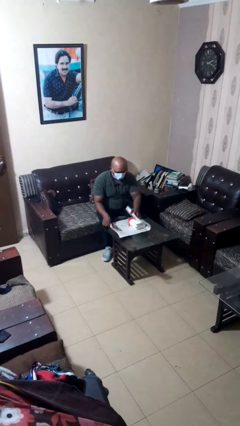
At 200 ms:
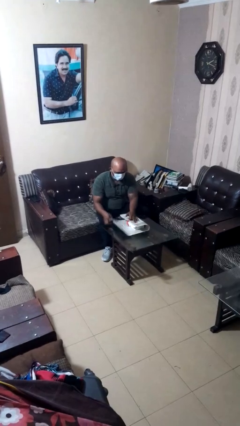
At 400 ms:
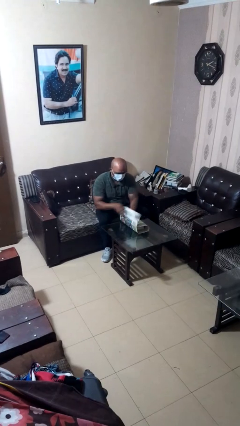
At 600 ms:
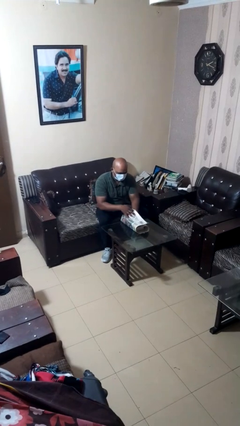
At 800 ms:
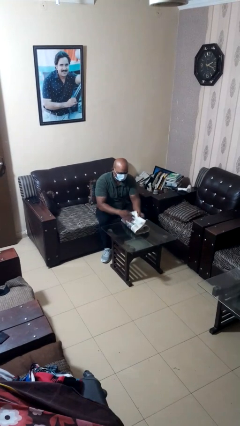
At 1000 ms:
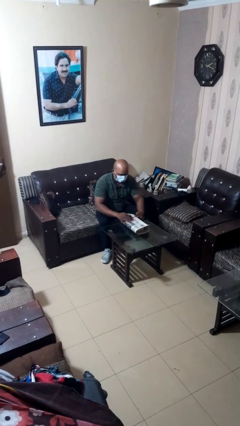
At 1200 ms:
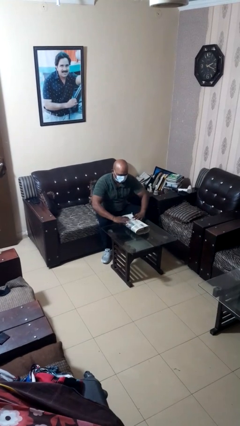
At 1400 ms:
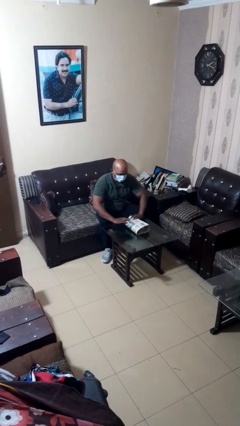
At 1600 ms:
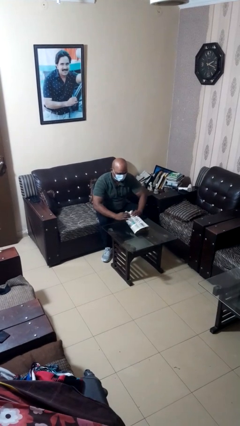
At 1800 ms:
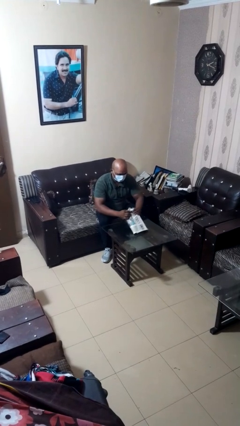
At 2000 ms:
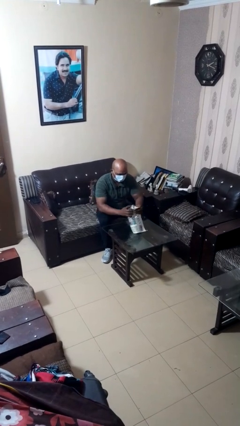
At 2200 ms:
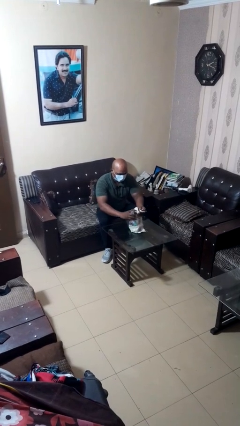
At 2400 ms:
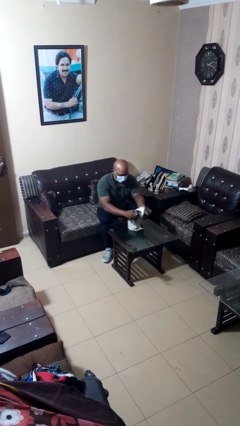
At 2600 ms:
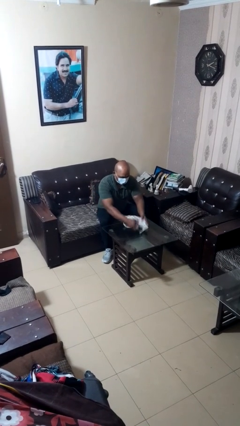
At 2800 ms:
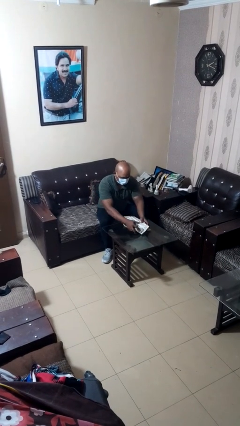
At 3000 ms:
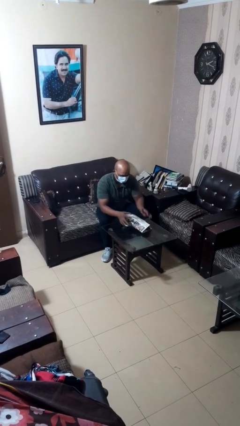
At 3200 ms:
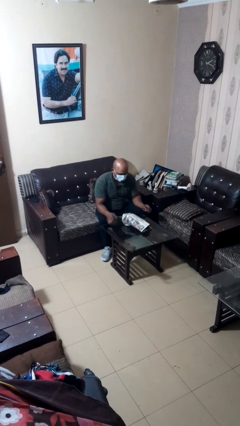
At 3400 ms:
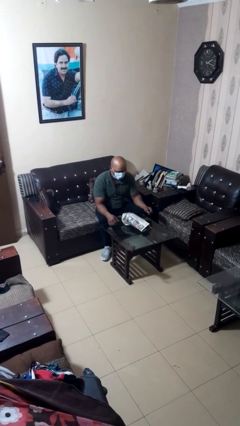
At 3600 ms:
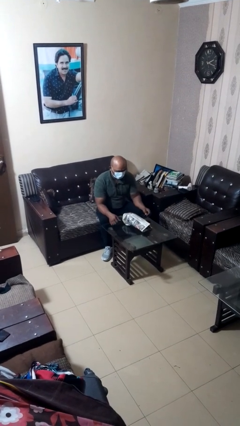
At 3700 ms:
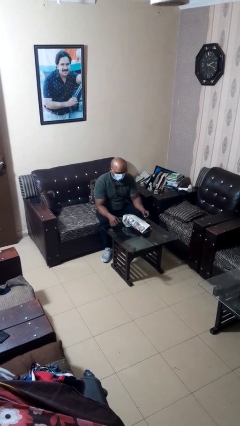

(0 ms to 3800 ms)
person wraps box

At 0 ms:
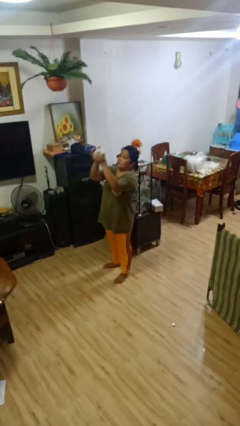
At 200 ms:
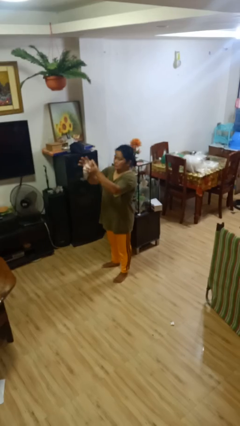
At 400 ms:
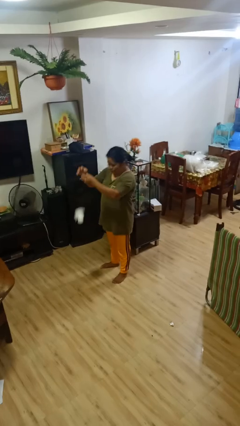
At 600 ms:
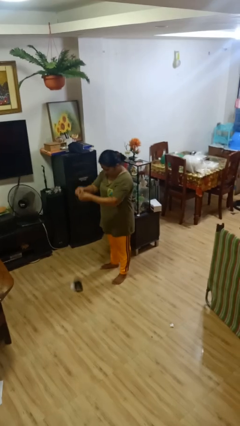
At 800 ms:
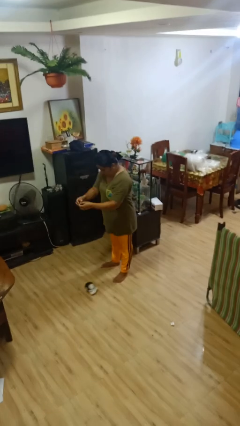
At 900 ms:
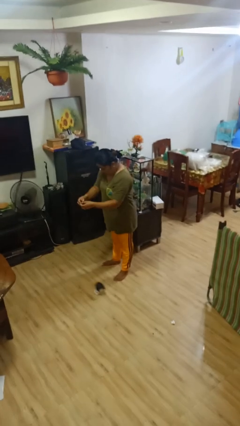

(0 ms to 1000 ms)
person catches dropped object

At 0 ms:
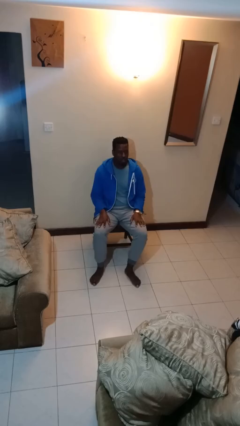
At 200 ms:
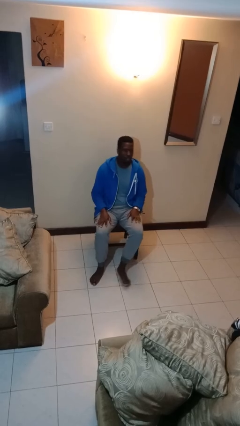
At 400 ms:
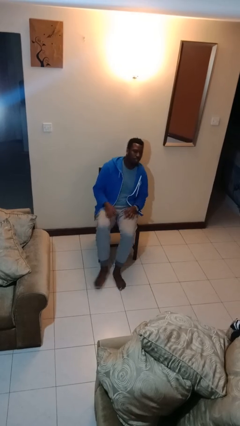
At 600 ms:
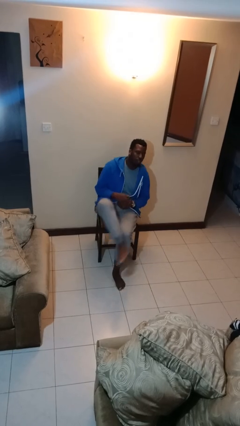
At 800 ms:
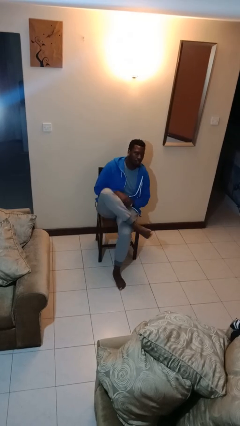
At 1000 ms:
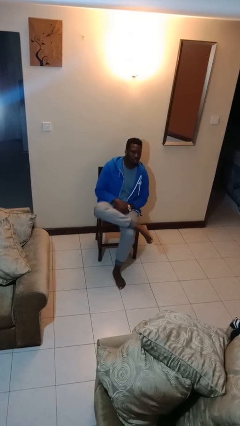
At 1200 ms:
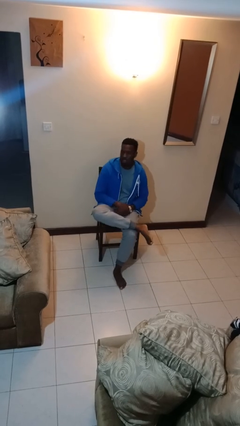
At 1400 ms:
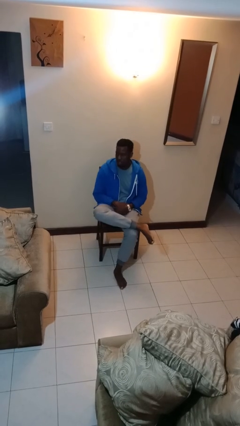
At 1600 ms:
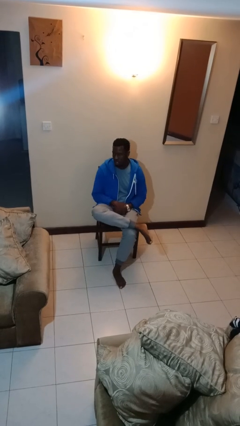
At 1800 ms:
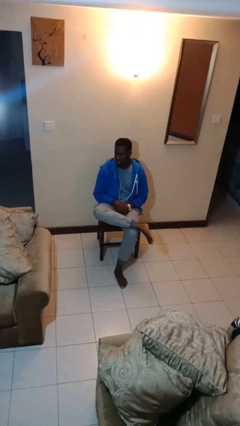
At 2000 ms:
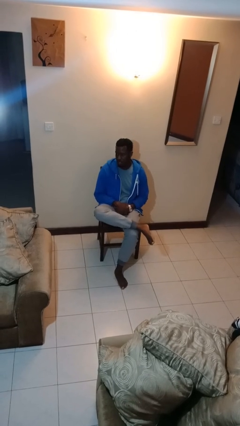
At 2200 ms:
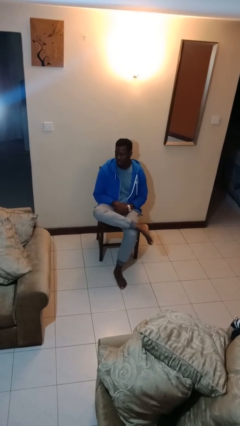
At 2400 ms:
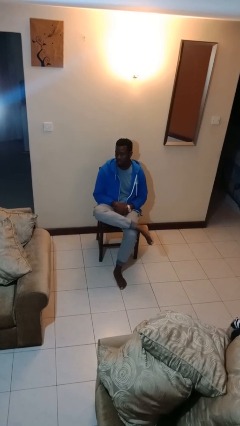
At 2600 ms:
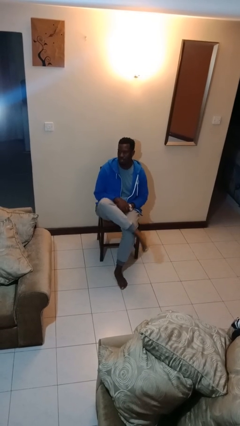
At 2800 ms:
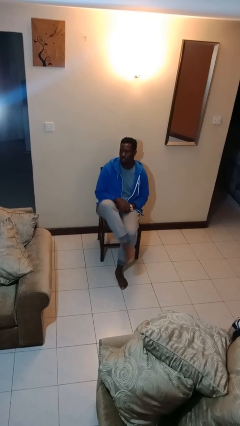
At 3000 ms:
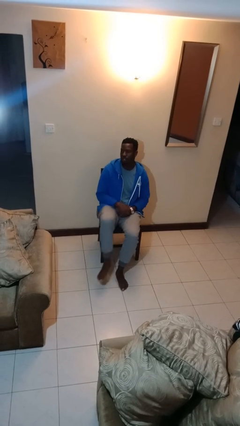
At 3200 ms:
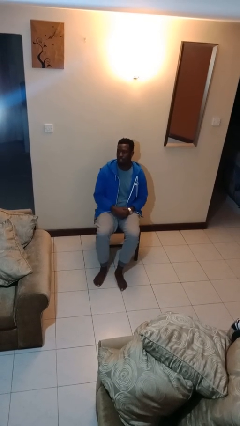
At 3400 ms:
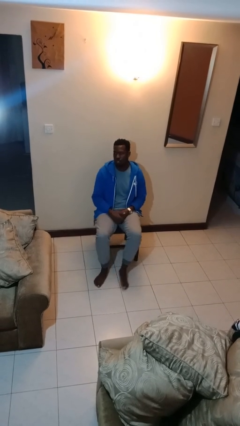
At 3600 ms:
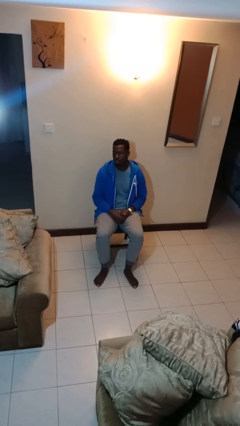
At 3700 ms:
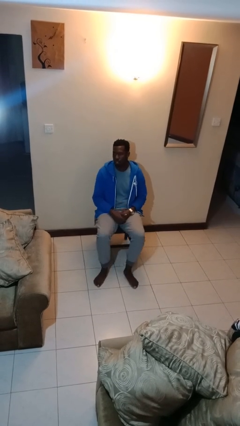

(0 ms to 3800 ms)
person crosses legs

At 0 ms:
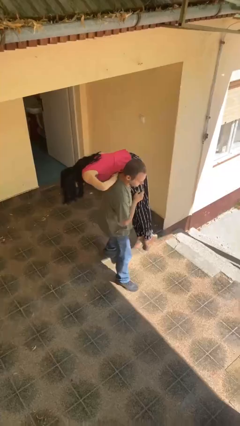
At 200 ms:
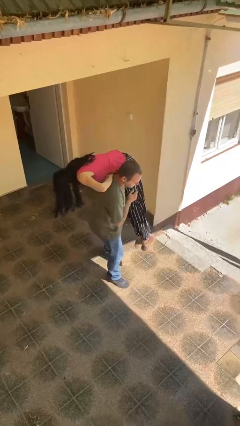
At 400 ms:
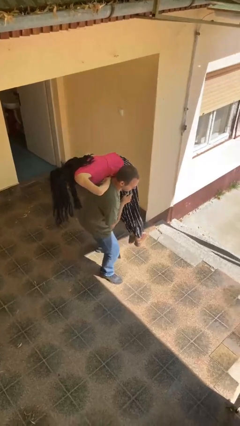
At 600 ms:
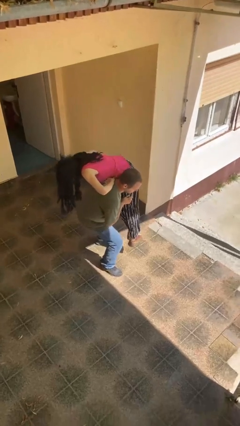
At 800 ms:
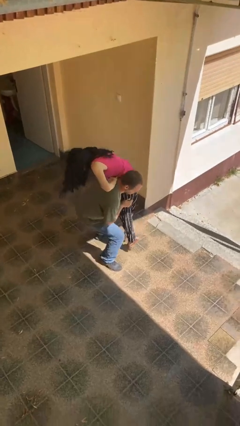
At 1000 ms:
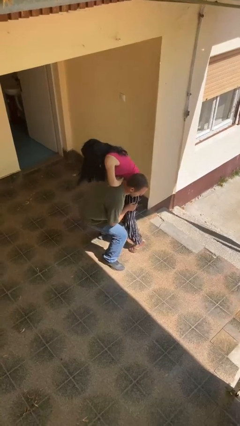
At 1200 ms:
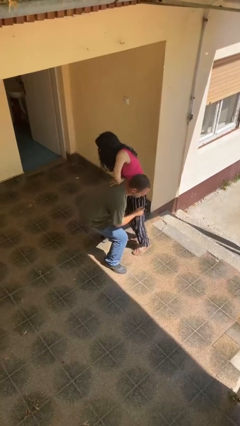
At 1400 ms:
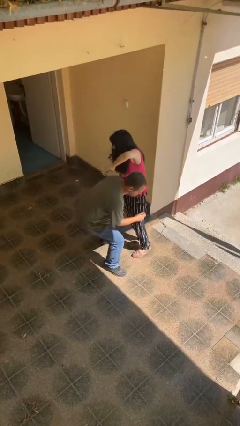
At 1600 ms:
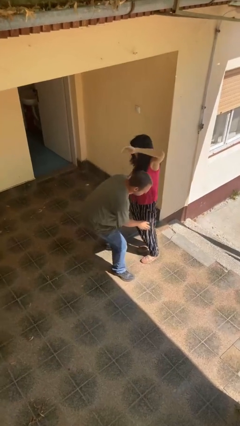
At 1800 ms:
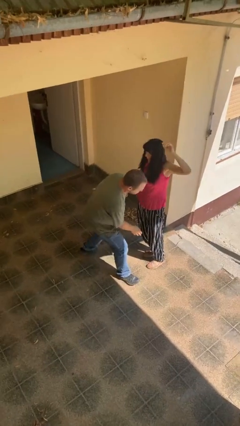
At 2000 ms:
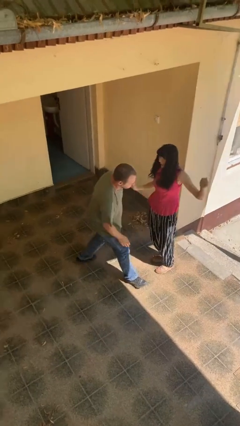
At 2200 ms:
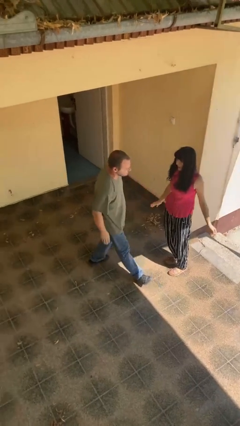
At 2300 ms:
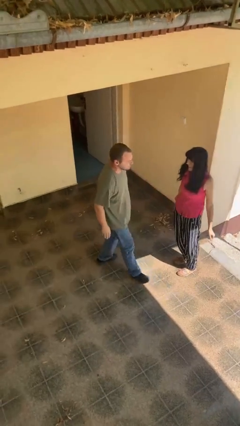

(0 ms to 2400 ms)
person puts down person

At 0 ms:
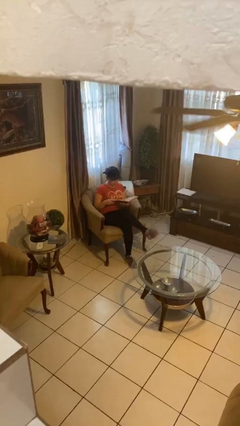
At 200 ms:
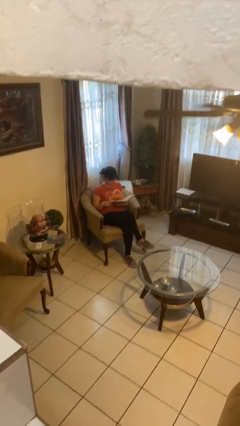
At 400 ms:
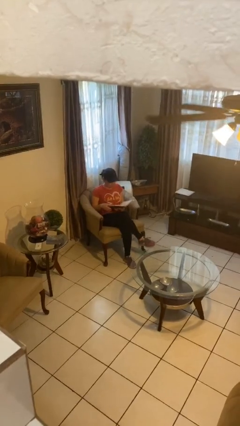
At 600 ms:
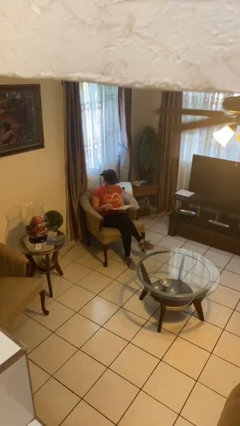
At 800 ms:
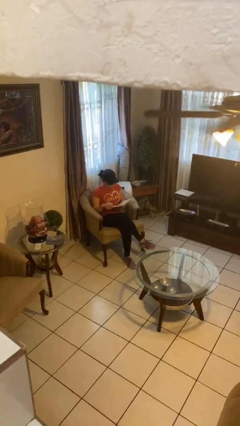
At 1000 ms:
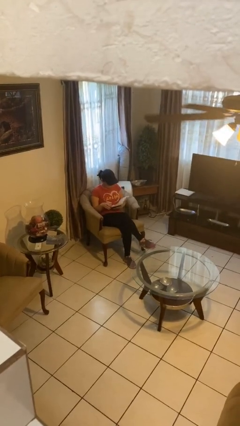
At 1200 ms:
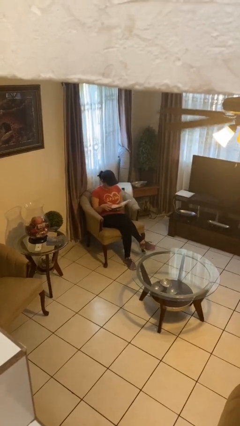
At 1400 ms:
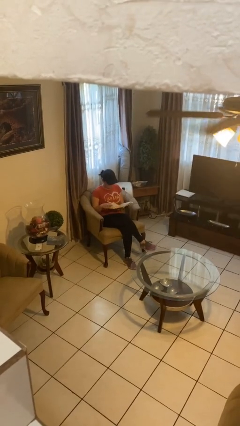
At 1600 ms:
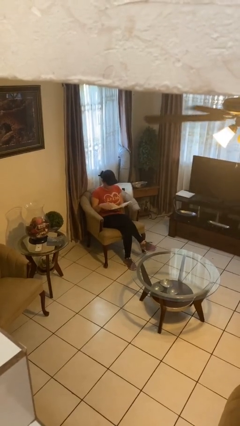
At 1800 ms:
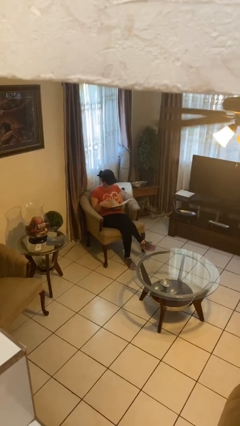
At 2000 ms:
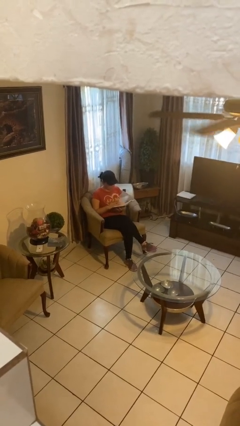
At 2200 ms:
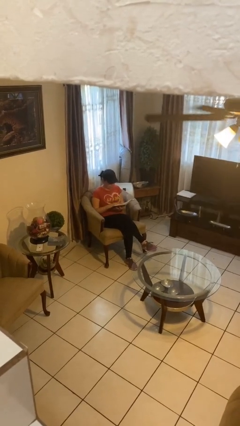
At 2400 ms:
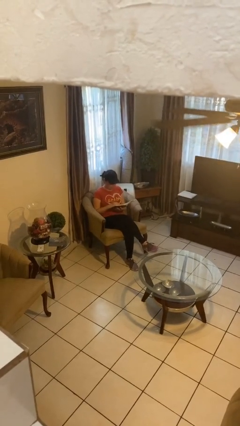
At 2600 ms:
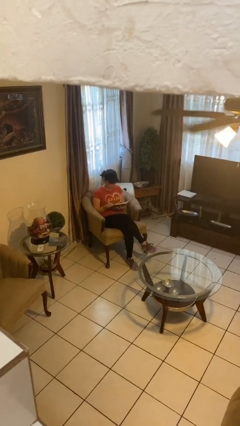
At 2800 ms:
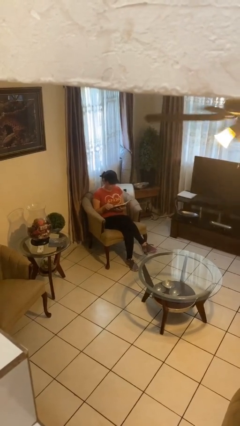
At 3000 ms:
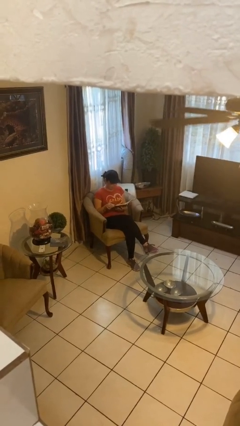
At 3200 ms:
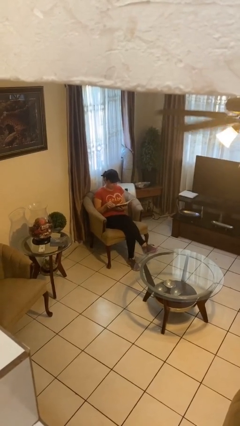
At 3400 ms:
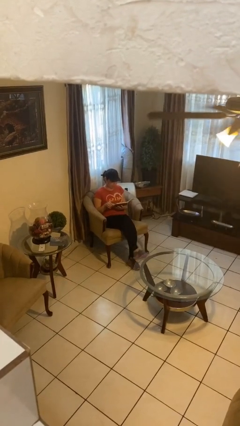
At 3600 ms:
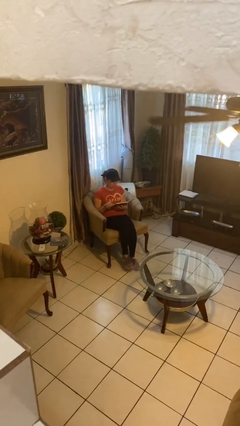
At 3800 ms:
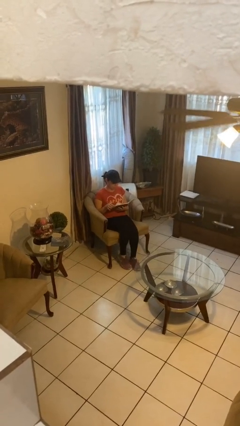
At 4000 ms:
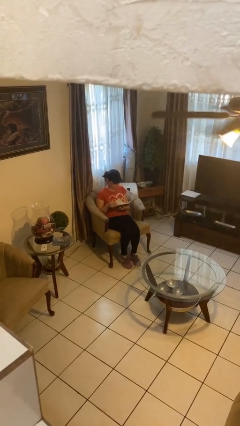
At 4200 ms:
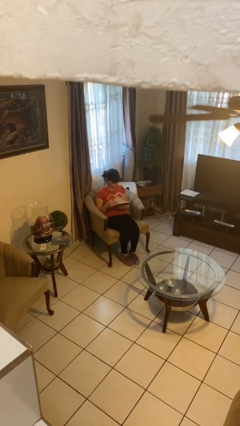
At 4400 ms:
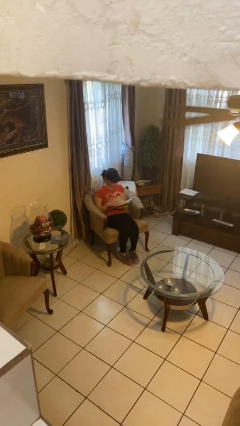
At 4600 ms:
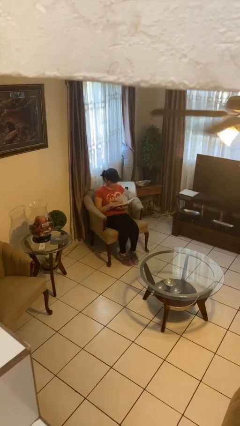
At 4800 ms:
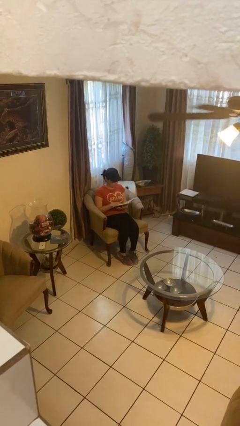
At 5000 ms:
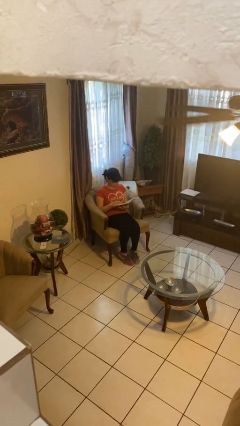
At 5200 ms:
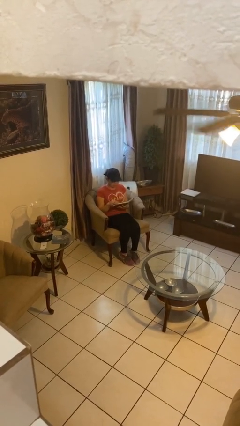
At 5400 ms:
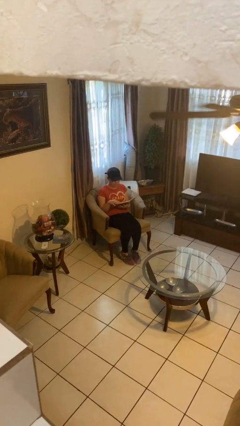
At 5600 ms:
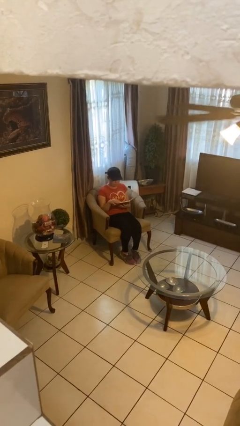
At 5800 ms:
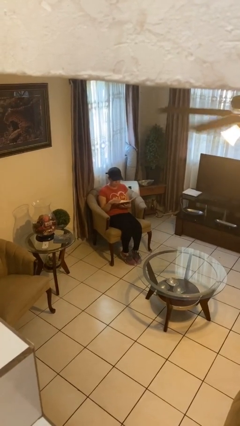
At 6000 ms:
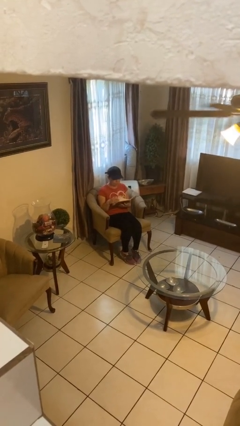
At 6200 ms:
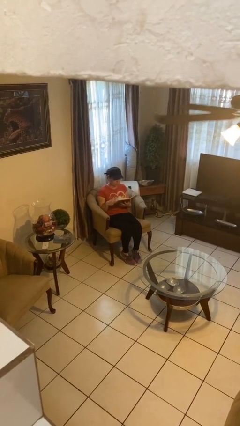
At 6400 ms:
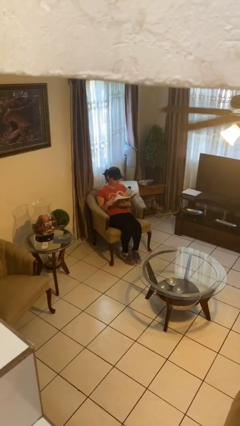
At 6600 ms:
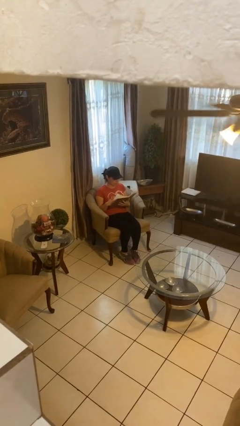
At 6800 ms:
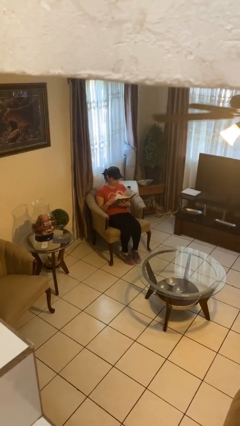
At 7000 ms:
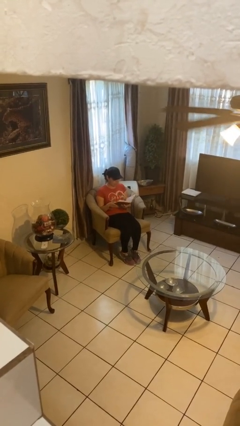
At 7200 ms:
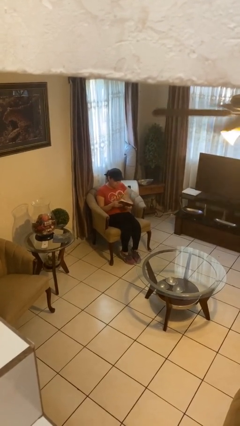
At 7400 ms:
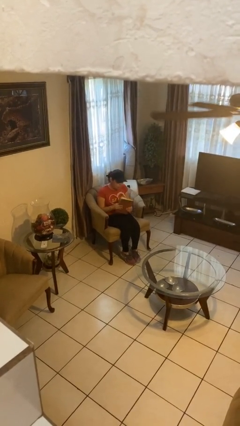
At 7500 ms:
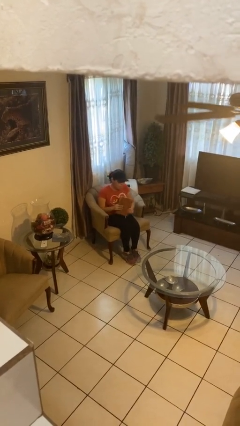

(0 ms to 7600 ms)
person reads document
